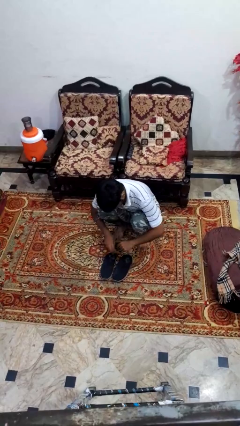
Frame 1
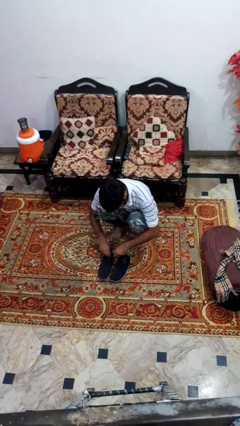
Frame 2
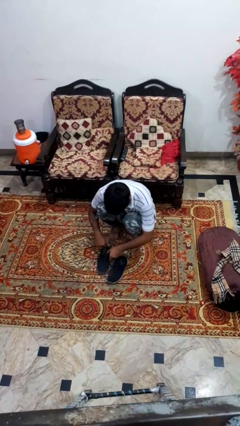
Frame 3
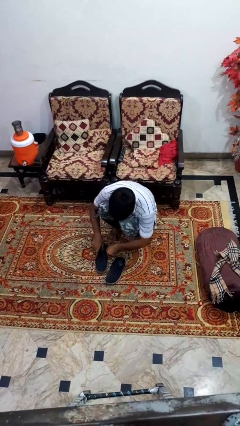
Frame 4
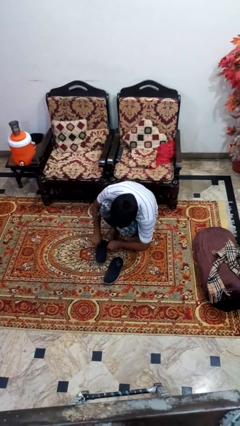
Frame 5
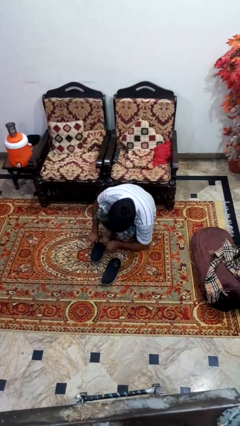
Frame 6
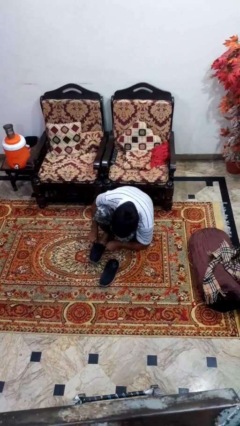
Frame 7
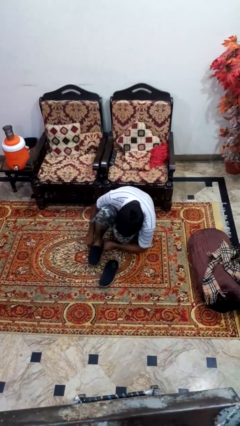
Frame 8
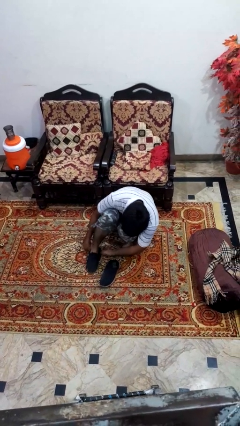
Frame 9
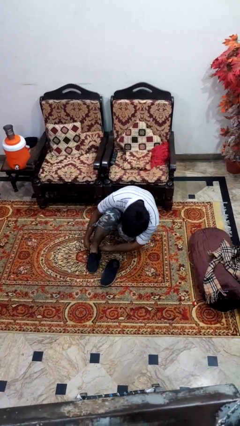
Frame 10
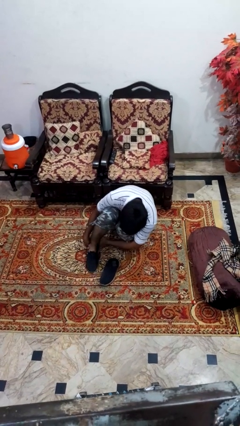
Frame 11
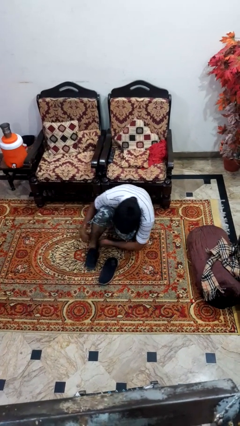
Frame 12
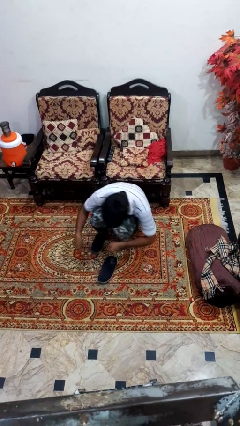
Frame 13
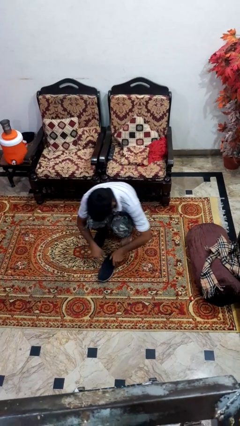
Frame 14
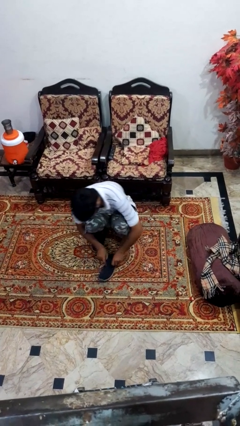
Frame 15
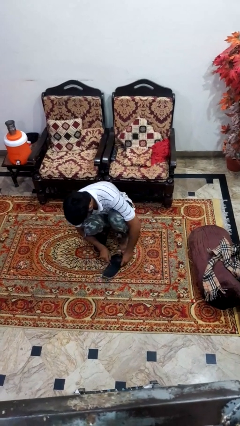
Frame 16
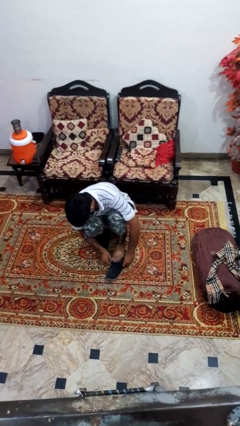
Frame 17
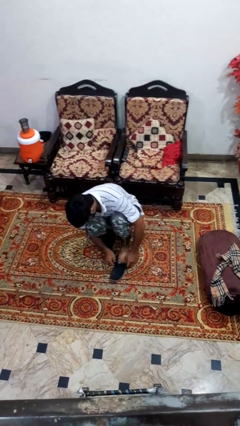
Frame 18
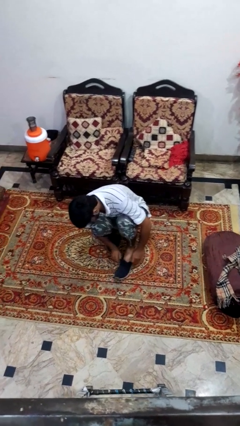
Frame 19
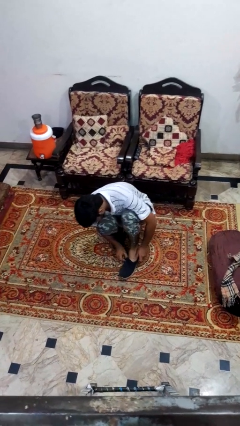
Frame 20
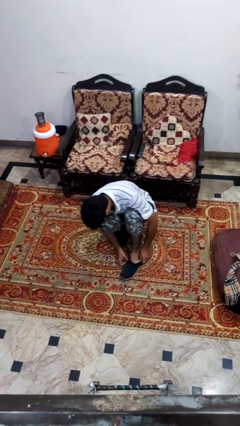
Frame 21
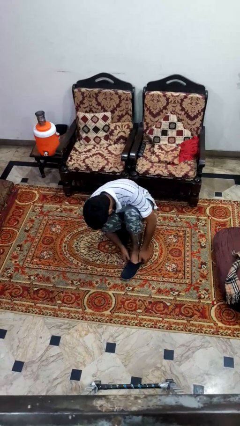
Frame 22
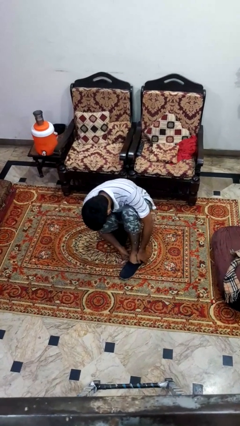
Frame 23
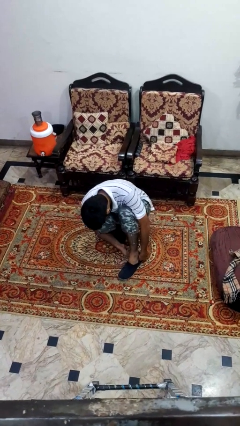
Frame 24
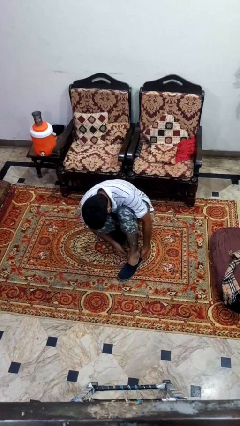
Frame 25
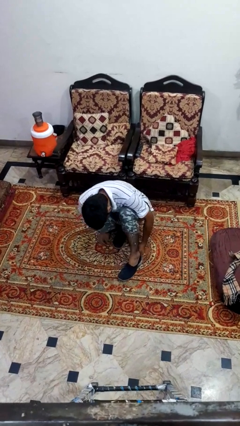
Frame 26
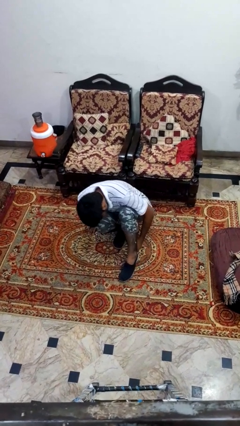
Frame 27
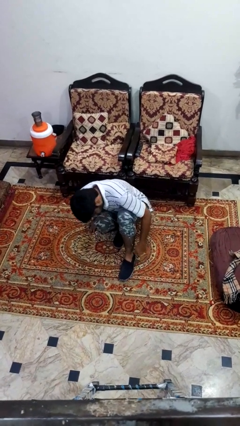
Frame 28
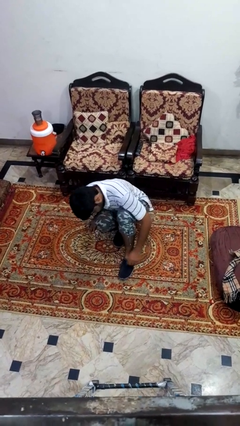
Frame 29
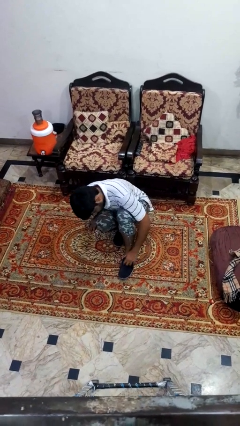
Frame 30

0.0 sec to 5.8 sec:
person puts on shoes

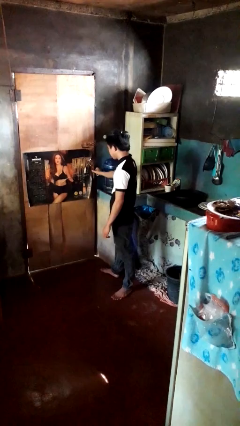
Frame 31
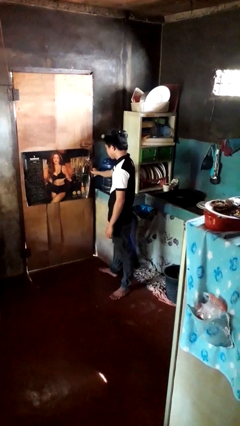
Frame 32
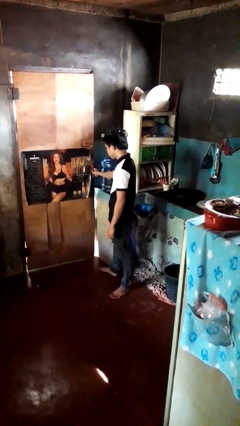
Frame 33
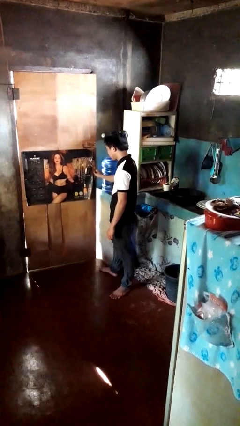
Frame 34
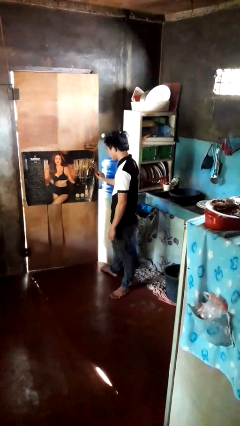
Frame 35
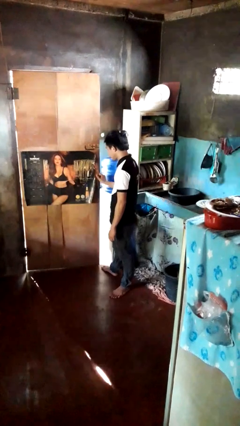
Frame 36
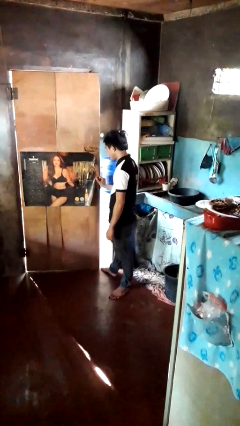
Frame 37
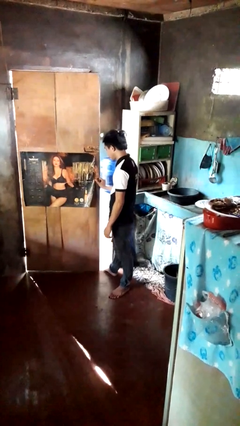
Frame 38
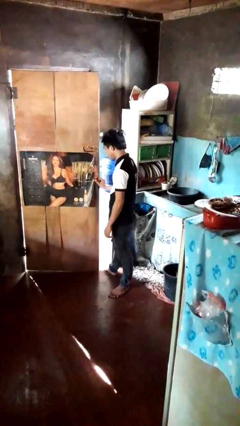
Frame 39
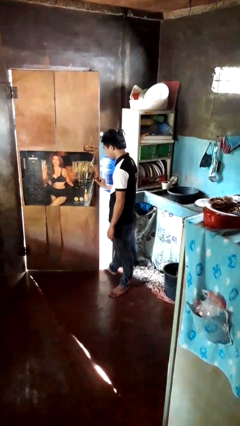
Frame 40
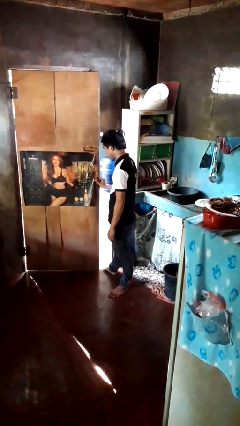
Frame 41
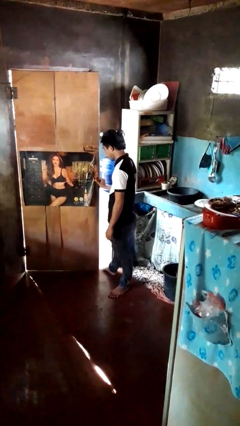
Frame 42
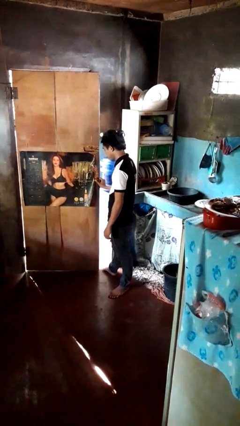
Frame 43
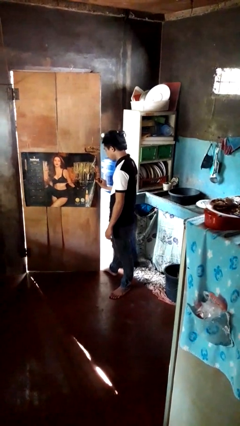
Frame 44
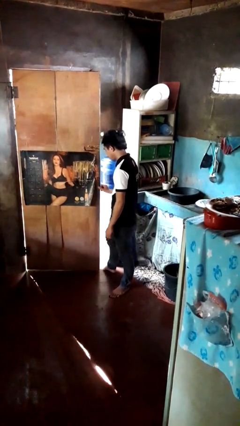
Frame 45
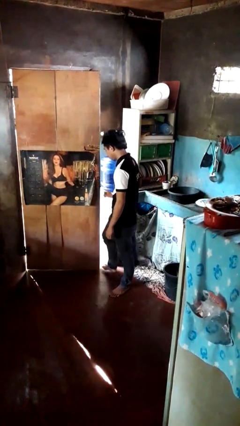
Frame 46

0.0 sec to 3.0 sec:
person opens facility door

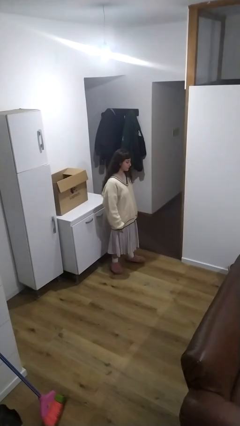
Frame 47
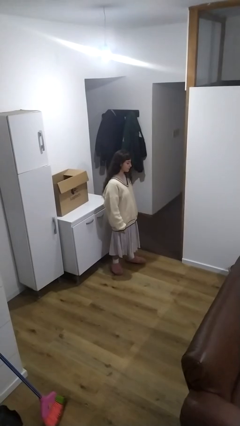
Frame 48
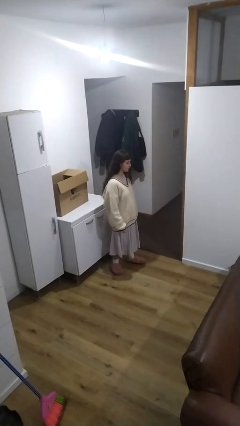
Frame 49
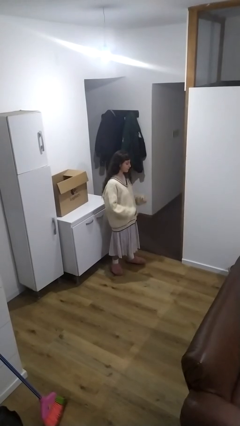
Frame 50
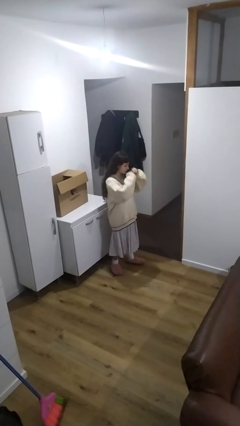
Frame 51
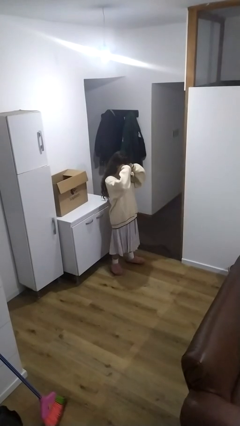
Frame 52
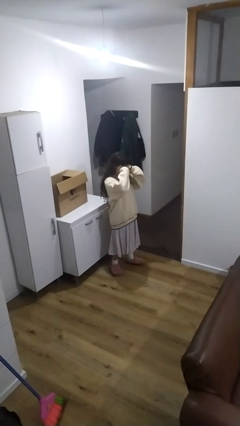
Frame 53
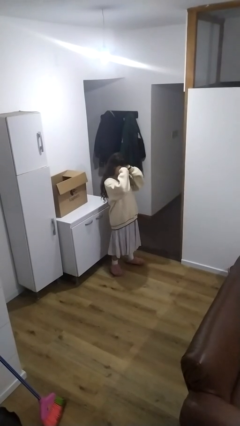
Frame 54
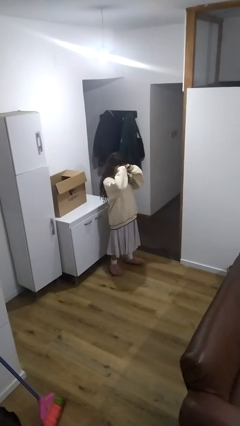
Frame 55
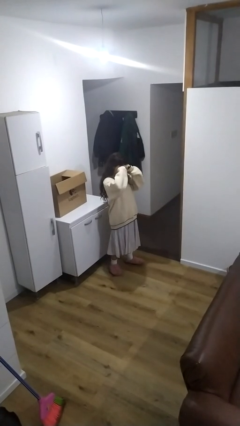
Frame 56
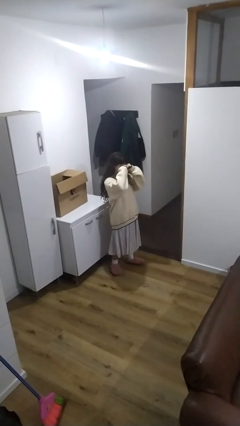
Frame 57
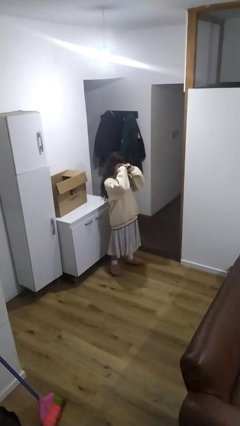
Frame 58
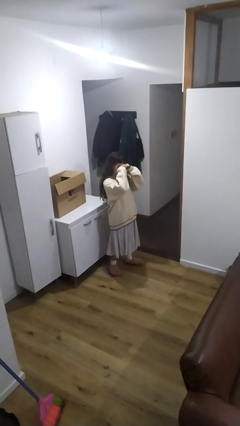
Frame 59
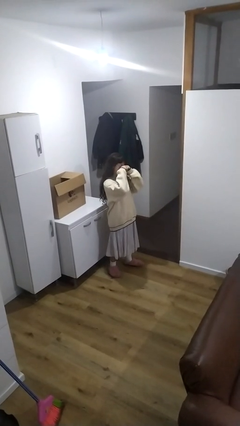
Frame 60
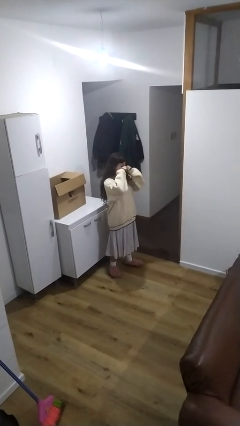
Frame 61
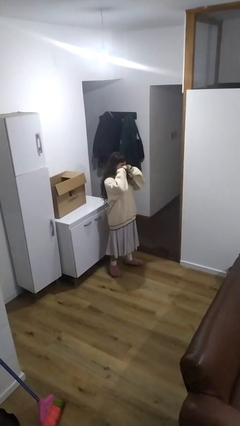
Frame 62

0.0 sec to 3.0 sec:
person rubs eyes

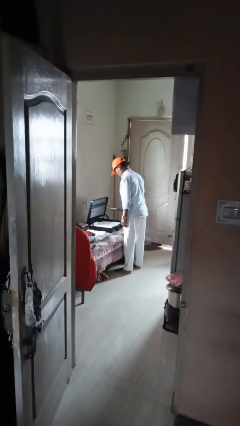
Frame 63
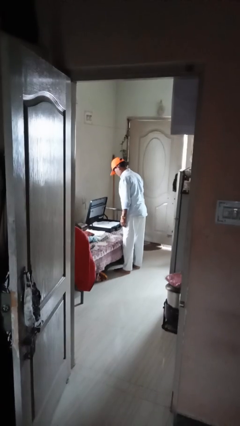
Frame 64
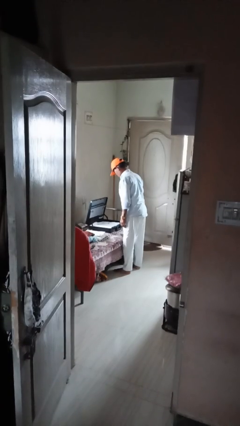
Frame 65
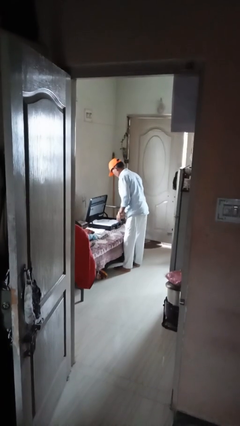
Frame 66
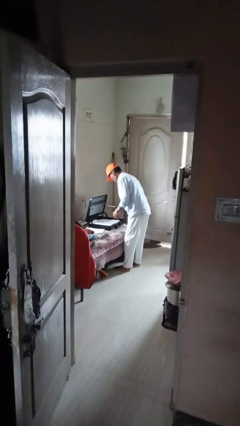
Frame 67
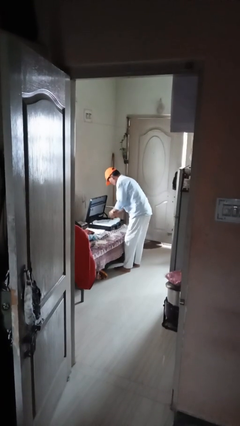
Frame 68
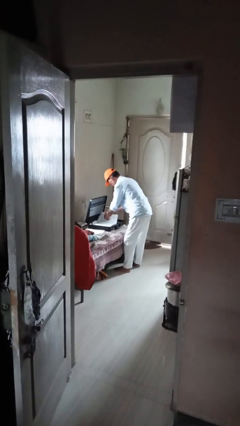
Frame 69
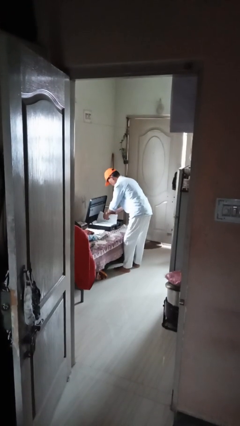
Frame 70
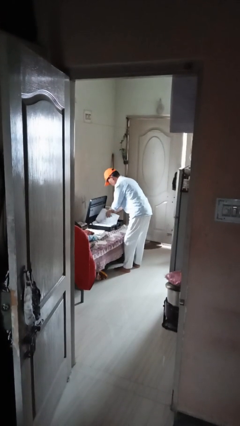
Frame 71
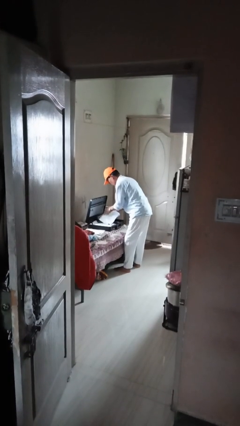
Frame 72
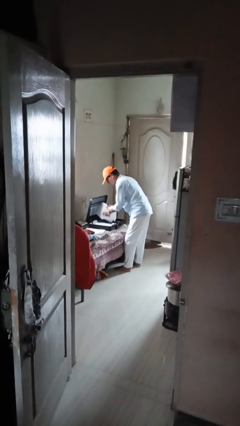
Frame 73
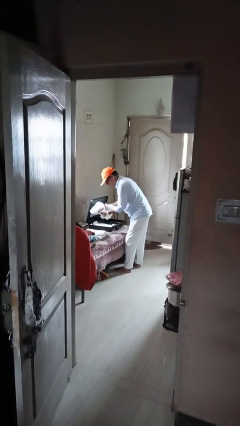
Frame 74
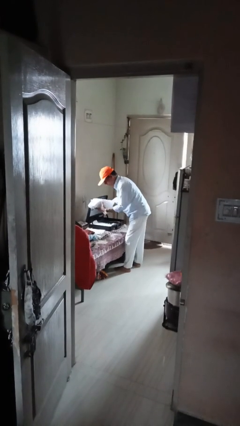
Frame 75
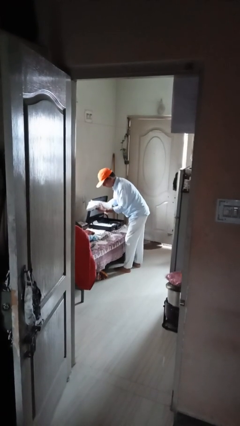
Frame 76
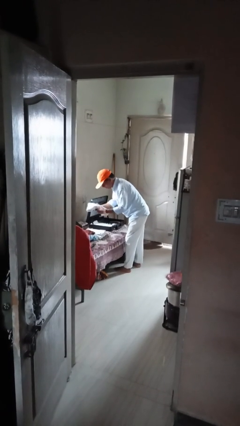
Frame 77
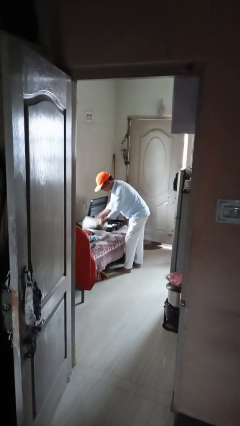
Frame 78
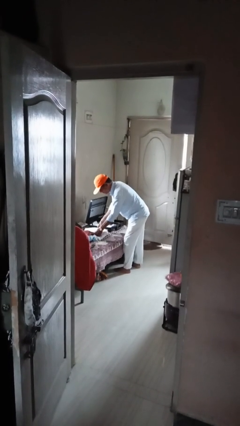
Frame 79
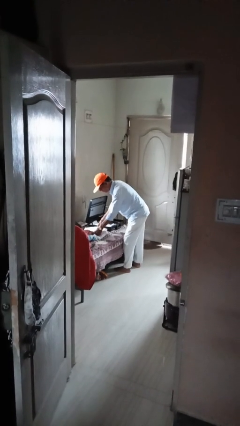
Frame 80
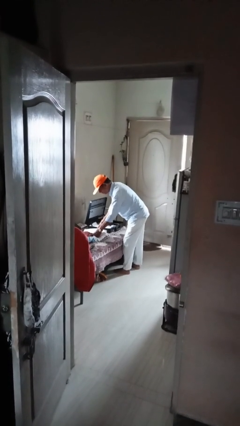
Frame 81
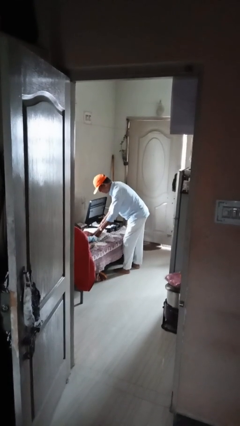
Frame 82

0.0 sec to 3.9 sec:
person unloads clothes from suitcase

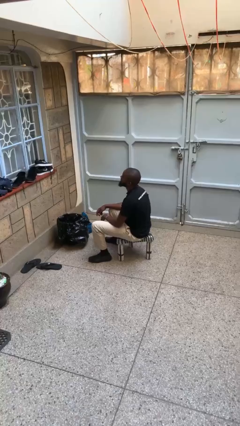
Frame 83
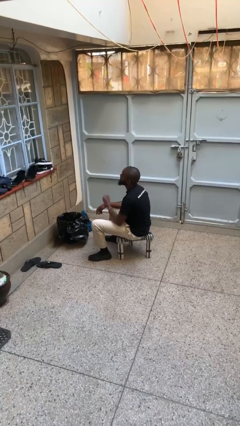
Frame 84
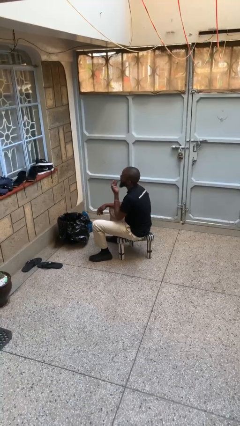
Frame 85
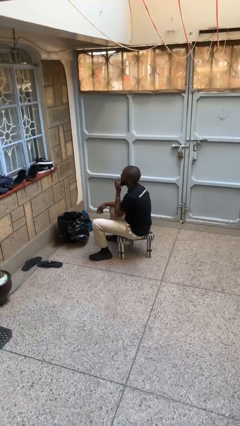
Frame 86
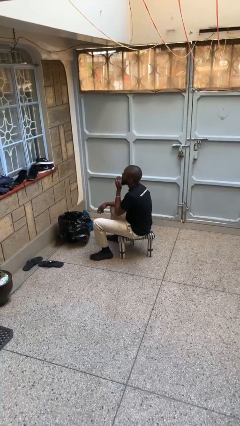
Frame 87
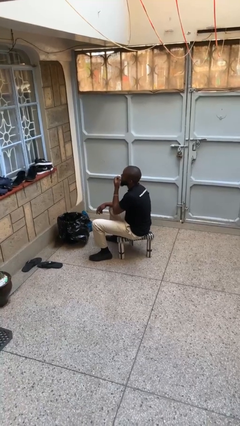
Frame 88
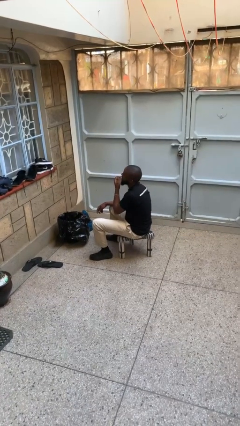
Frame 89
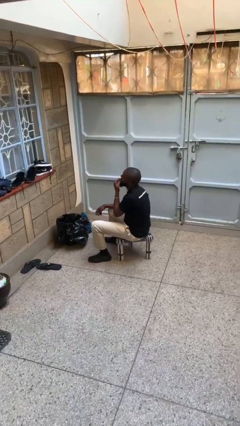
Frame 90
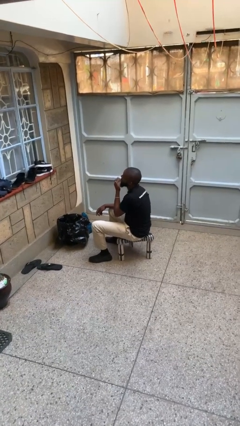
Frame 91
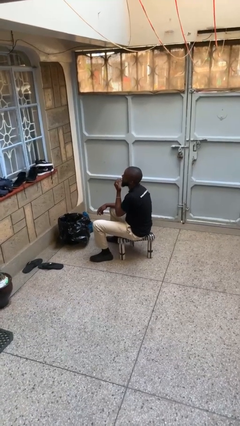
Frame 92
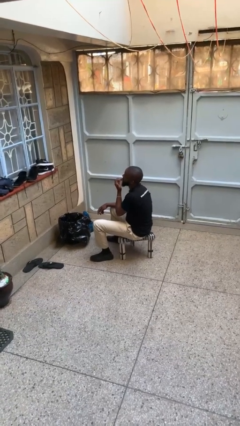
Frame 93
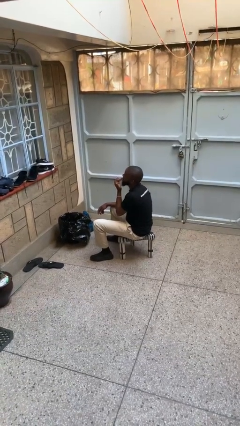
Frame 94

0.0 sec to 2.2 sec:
person licks fingers
